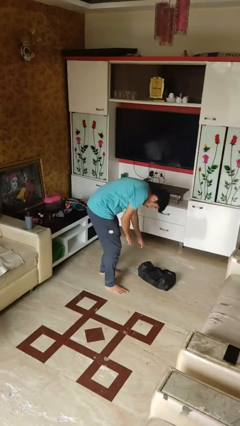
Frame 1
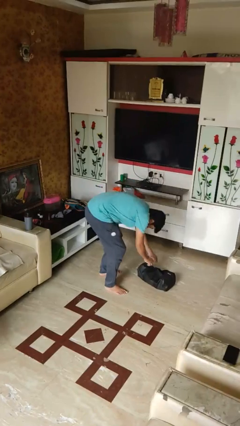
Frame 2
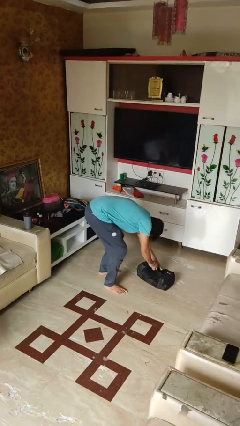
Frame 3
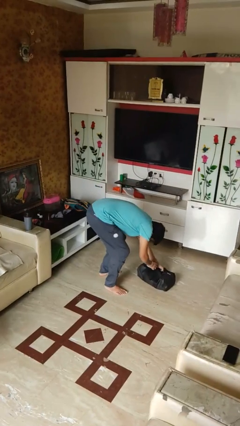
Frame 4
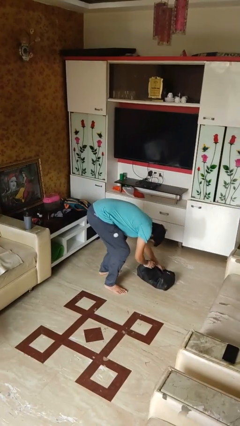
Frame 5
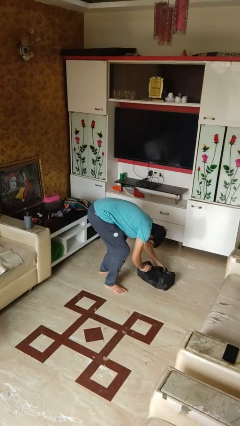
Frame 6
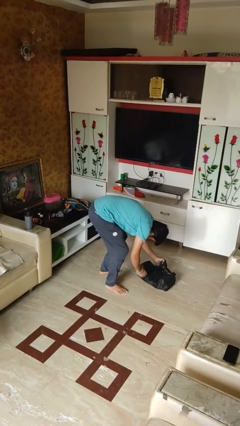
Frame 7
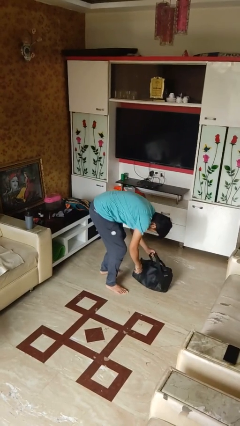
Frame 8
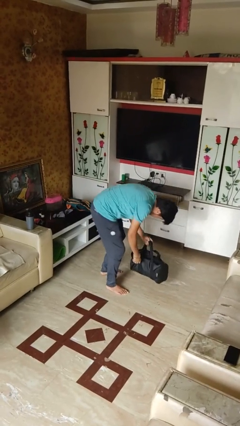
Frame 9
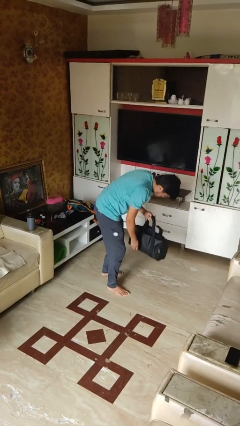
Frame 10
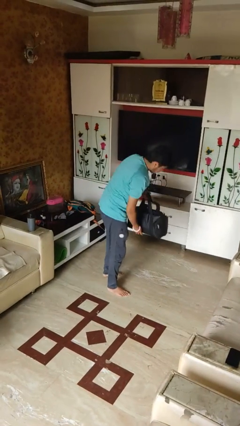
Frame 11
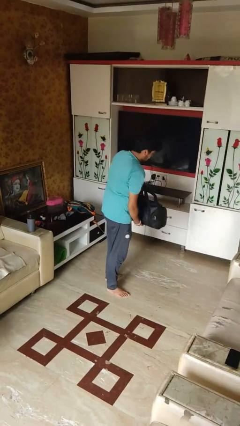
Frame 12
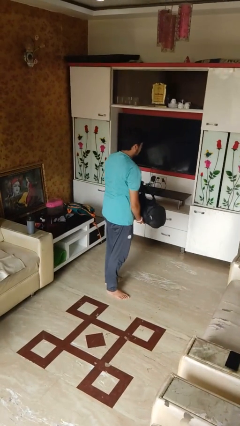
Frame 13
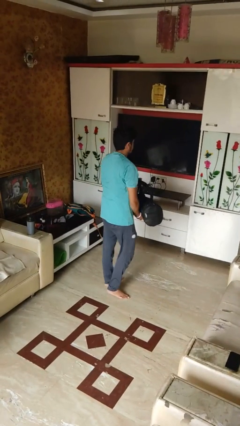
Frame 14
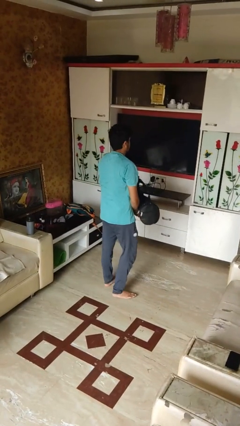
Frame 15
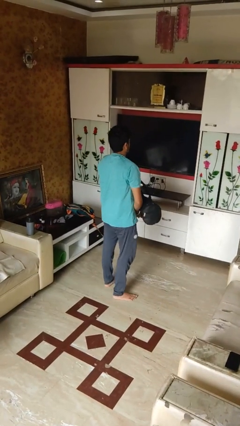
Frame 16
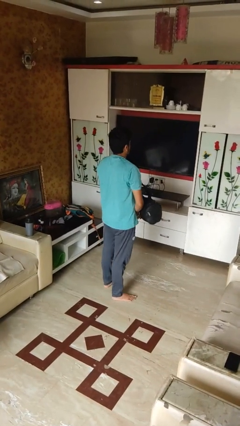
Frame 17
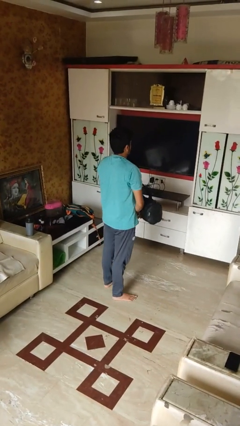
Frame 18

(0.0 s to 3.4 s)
person picks up object from floor

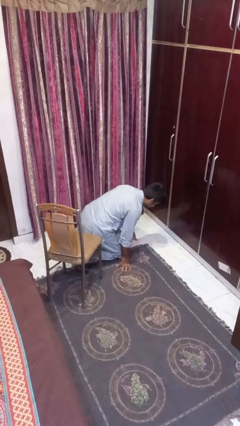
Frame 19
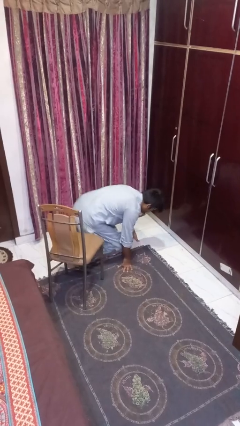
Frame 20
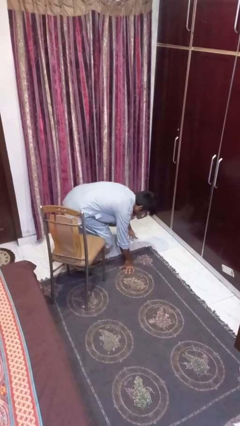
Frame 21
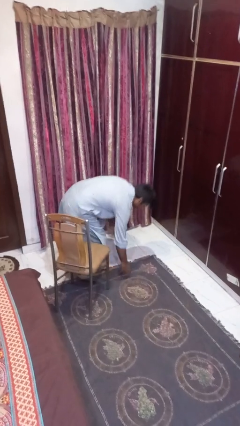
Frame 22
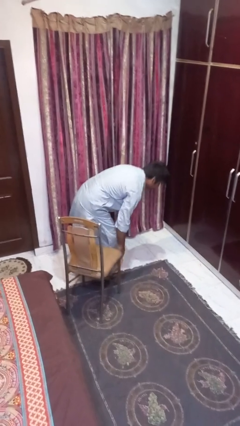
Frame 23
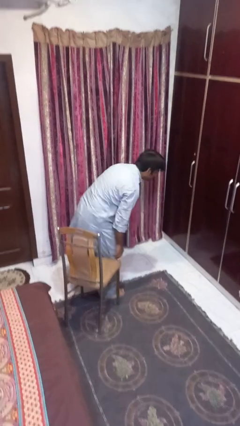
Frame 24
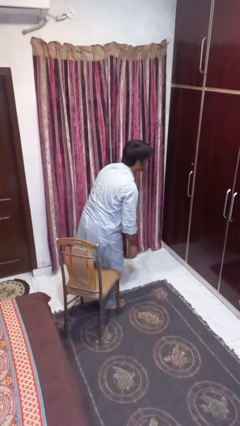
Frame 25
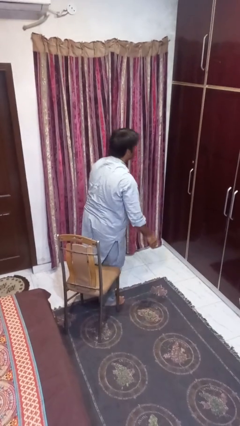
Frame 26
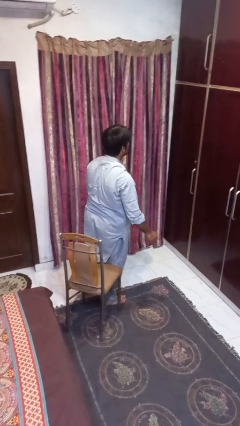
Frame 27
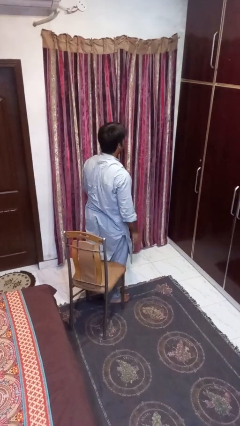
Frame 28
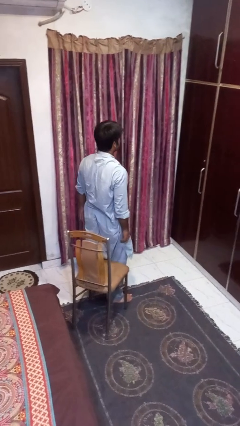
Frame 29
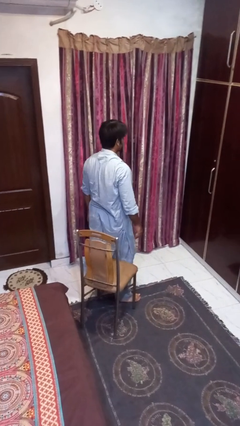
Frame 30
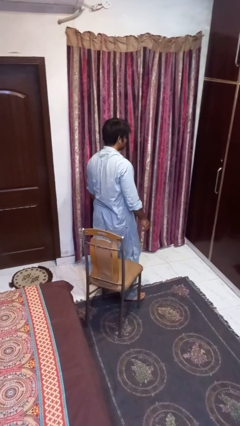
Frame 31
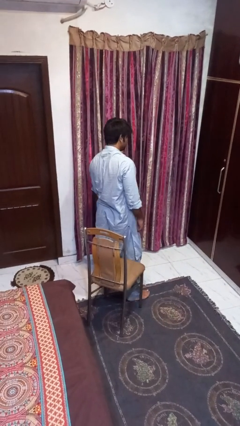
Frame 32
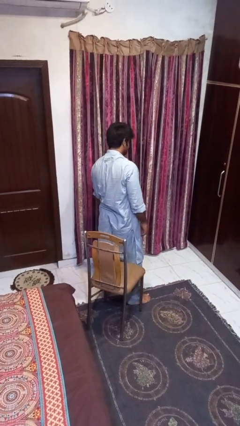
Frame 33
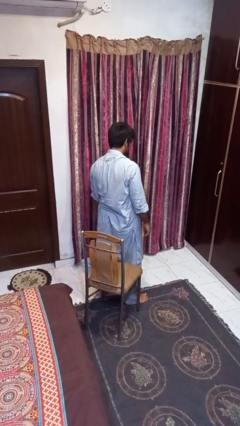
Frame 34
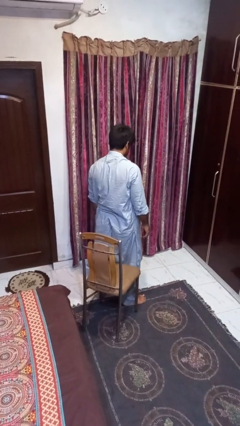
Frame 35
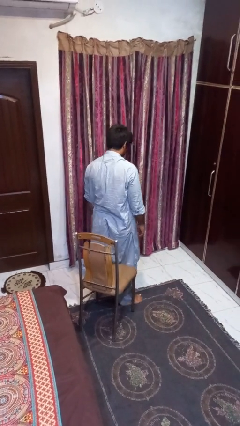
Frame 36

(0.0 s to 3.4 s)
person stands up from floor

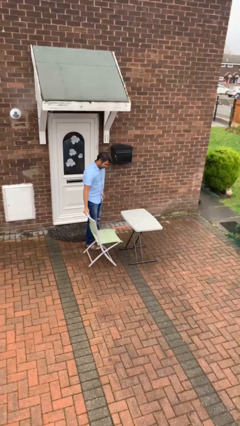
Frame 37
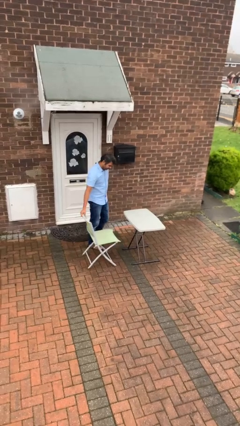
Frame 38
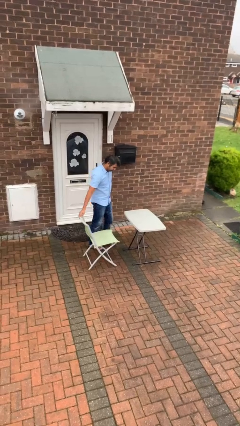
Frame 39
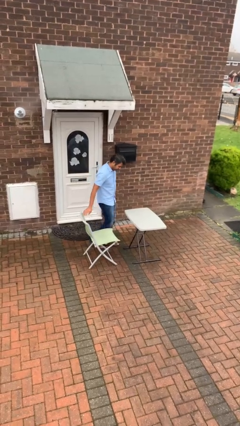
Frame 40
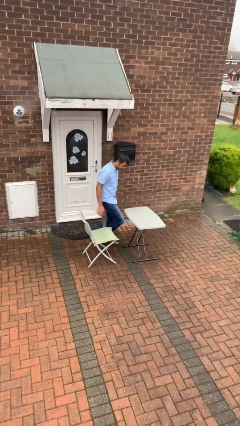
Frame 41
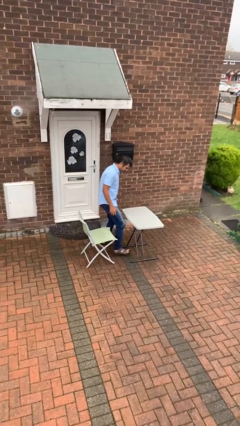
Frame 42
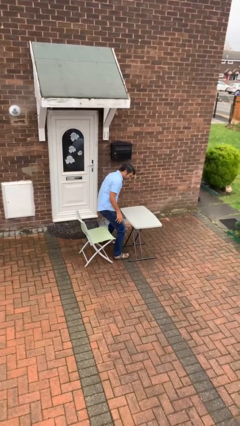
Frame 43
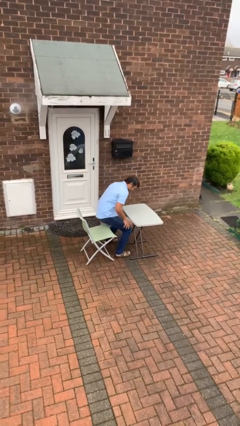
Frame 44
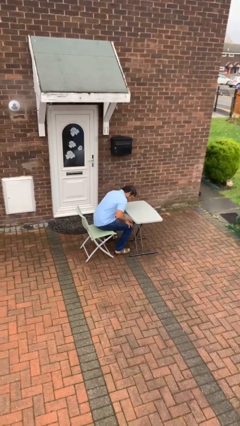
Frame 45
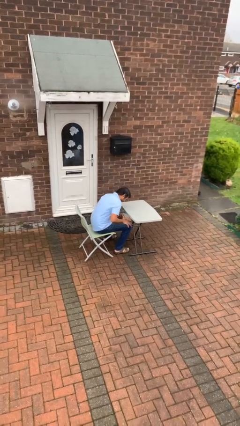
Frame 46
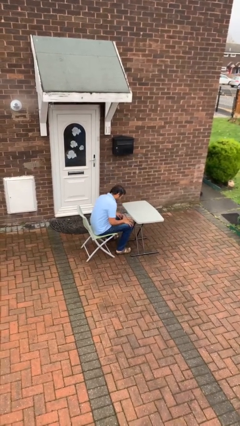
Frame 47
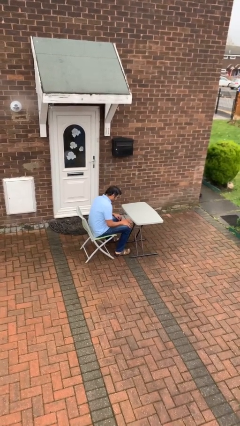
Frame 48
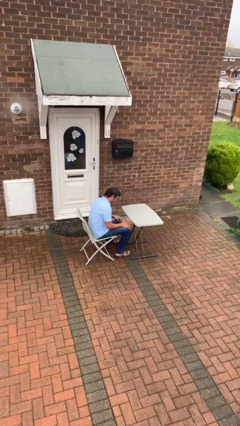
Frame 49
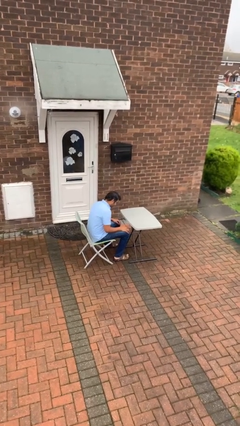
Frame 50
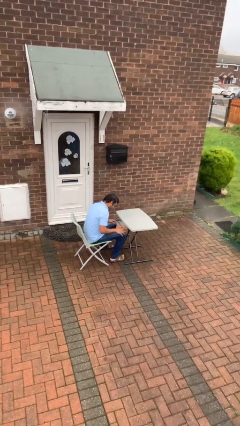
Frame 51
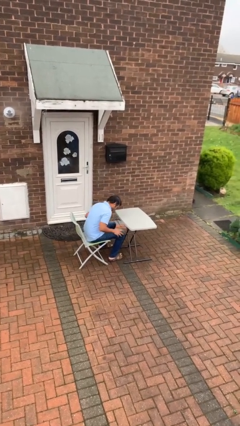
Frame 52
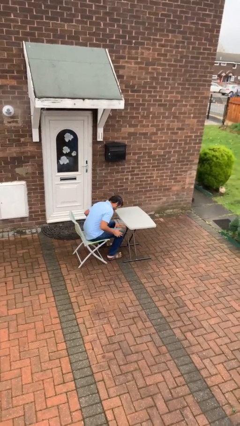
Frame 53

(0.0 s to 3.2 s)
person sits down

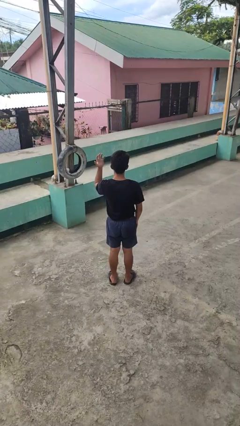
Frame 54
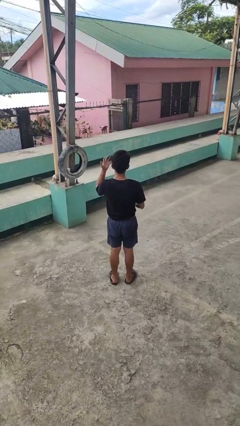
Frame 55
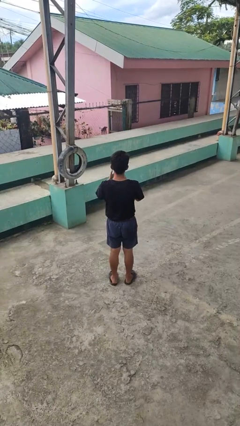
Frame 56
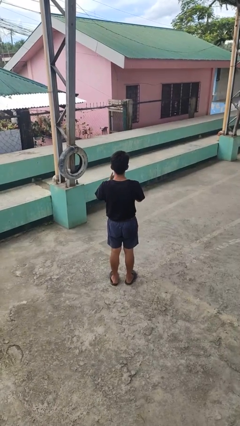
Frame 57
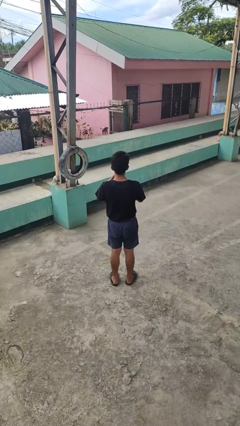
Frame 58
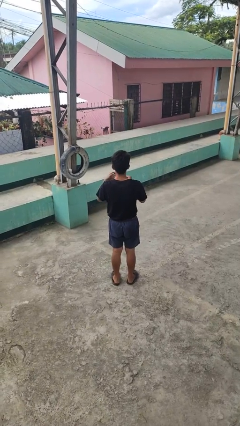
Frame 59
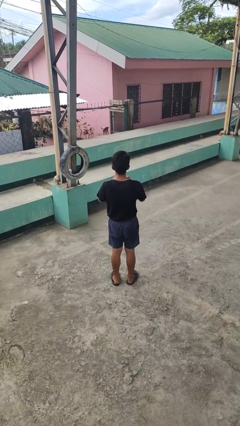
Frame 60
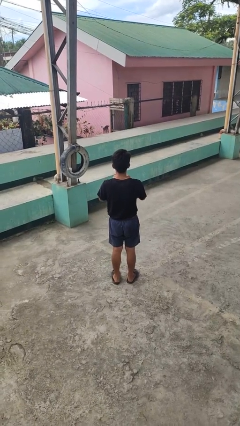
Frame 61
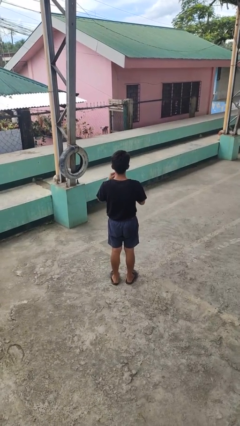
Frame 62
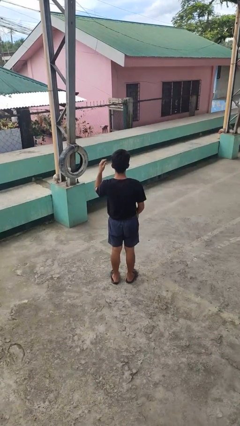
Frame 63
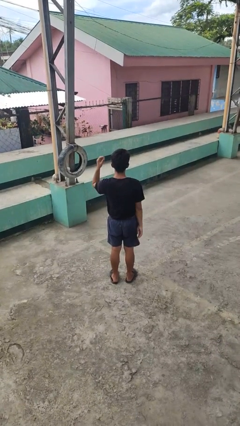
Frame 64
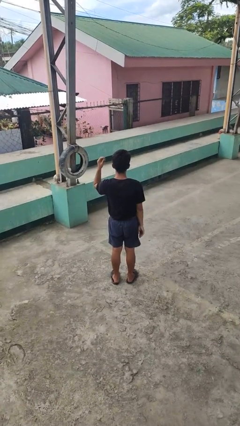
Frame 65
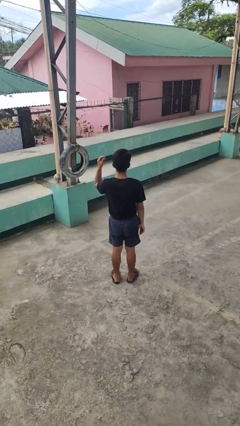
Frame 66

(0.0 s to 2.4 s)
person takes off ring

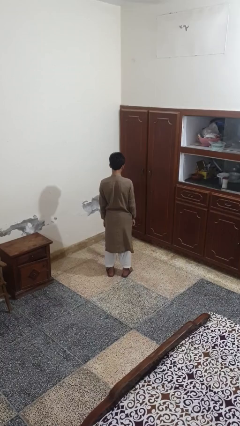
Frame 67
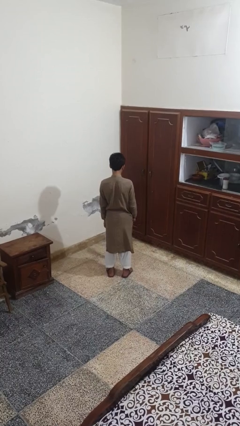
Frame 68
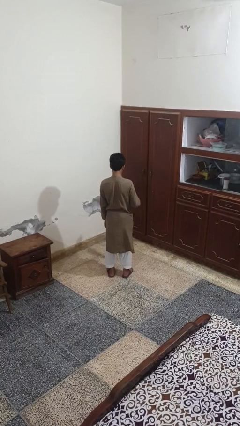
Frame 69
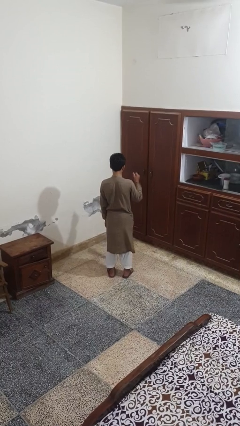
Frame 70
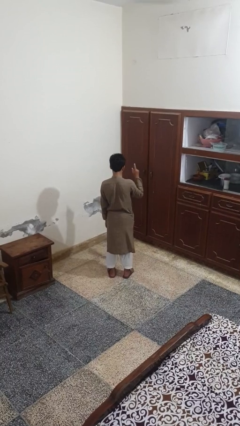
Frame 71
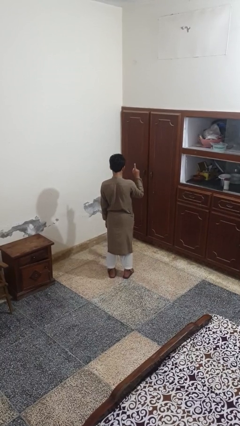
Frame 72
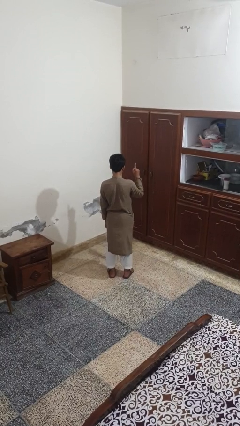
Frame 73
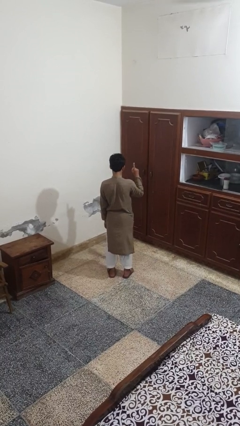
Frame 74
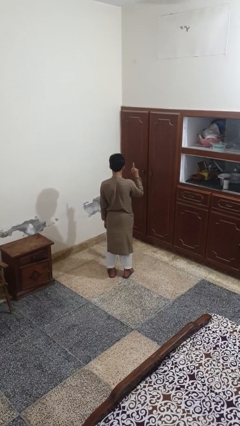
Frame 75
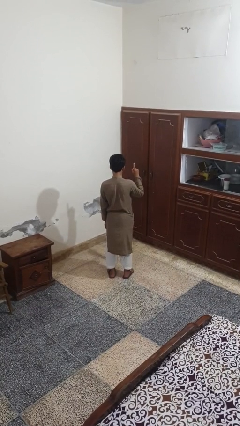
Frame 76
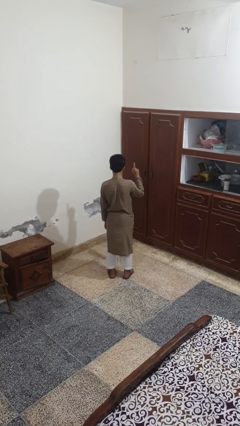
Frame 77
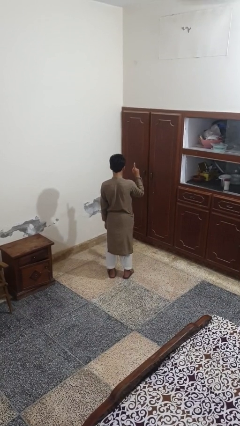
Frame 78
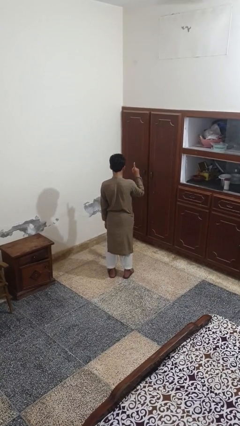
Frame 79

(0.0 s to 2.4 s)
person gestures number one

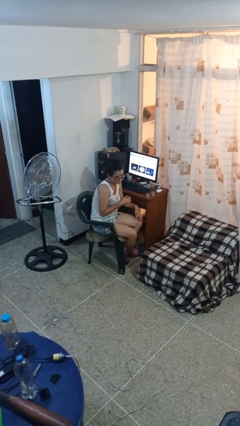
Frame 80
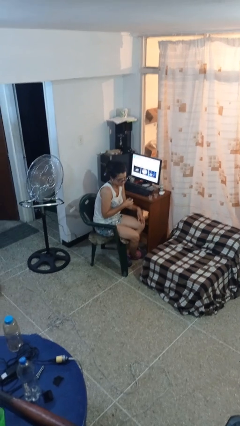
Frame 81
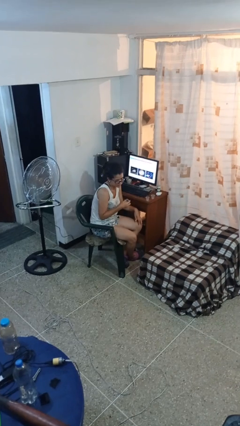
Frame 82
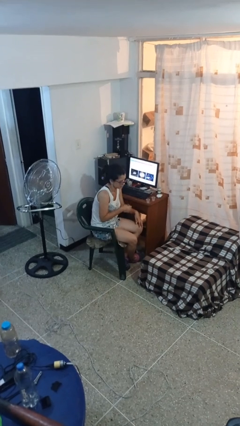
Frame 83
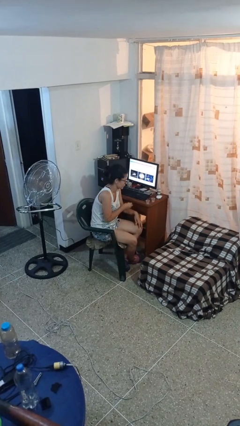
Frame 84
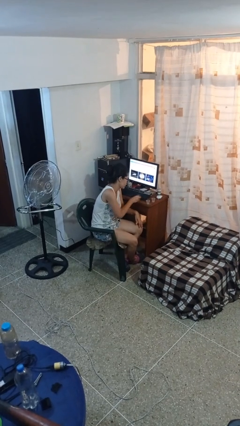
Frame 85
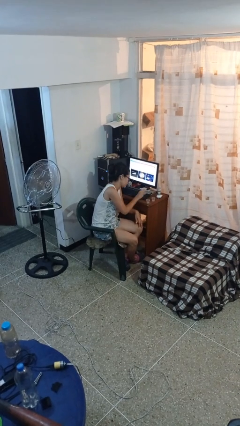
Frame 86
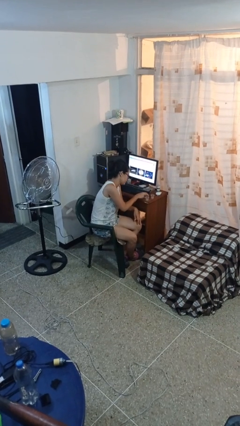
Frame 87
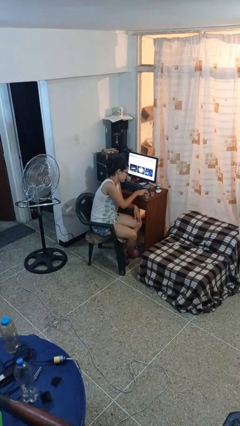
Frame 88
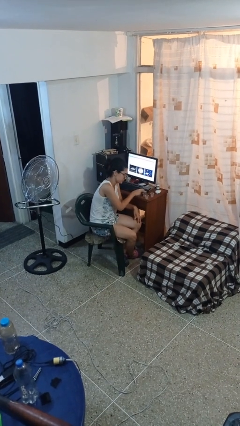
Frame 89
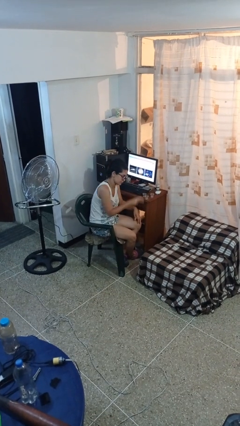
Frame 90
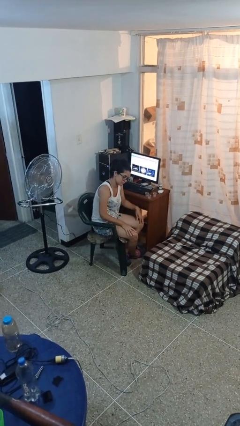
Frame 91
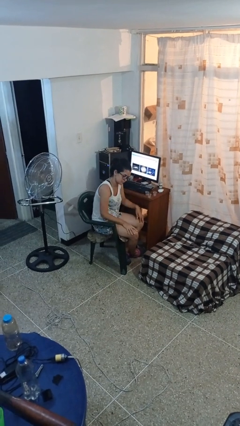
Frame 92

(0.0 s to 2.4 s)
person puts down object on table
